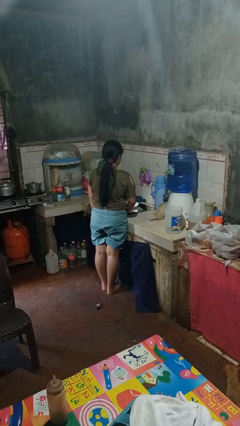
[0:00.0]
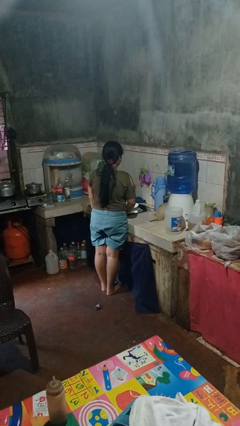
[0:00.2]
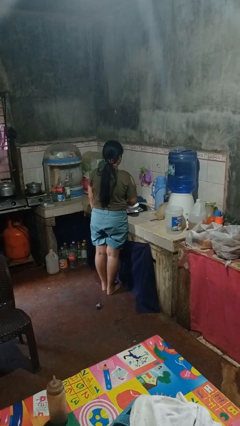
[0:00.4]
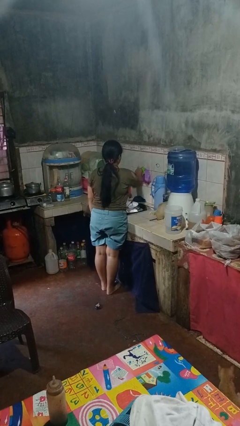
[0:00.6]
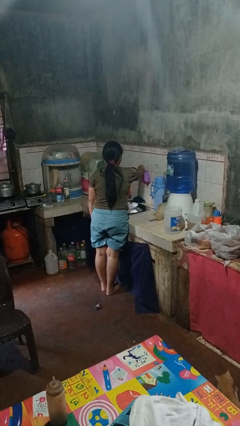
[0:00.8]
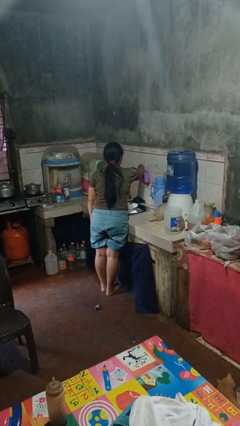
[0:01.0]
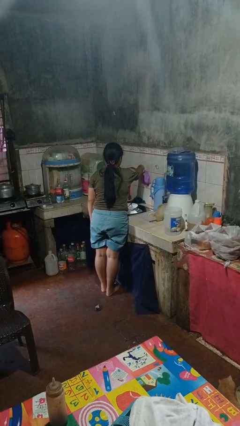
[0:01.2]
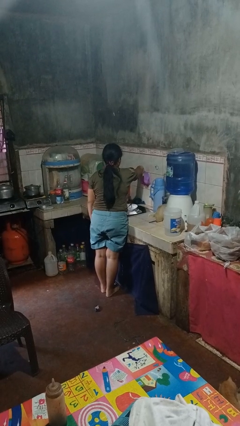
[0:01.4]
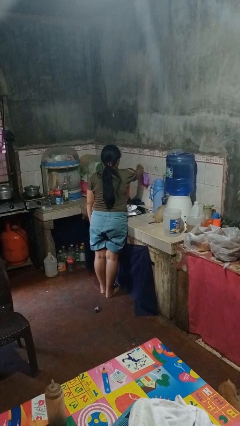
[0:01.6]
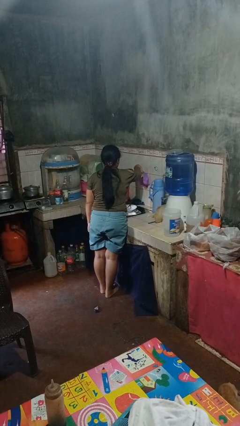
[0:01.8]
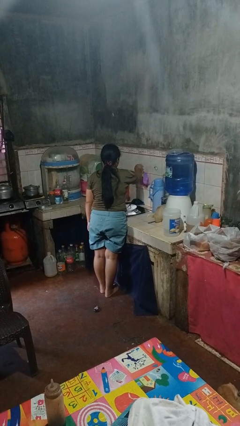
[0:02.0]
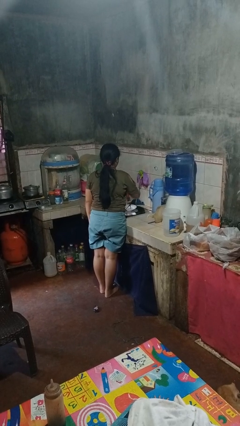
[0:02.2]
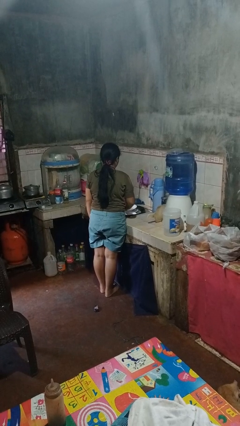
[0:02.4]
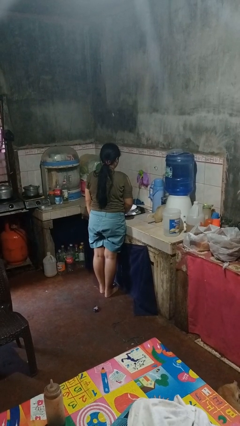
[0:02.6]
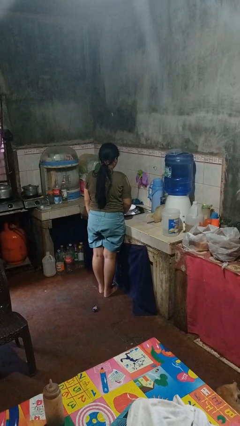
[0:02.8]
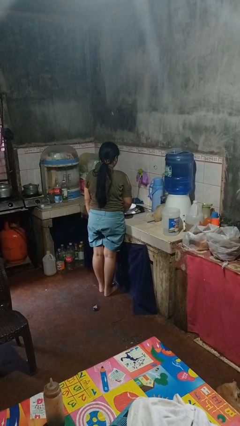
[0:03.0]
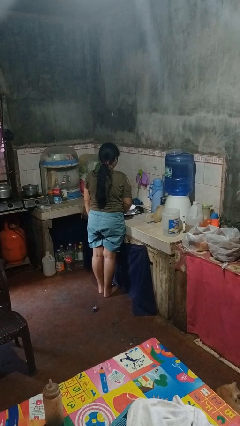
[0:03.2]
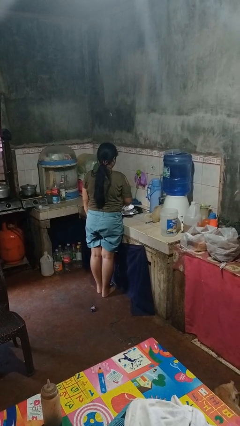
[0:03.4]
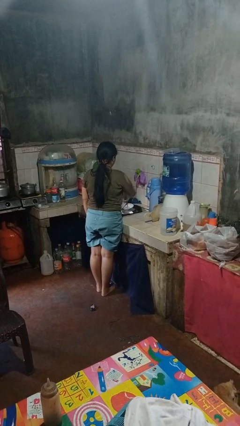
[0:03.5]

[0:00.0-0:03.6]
person turns on faucet

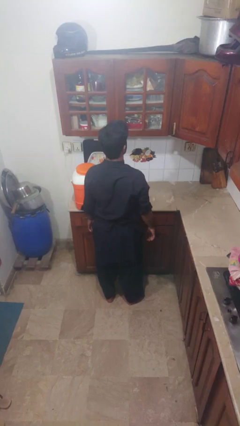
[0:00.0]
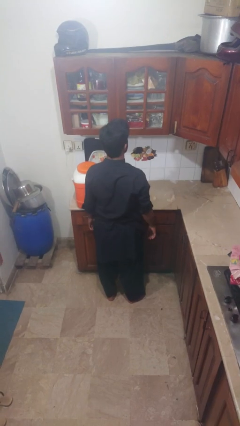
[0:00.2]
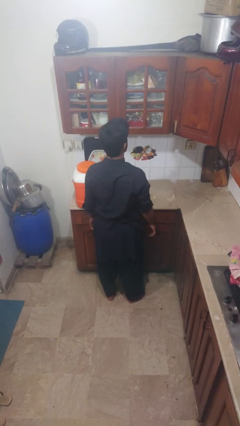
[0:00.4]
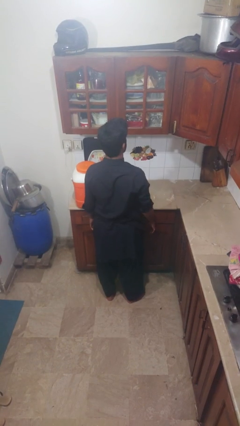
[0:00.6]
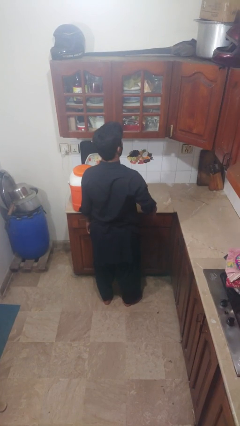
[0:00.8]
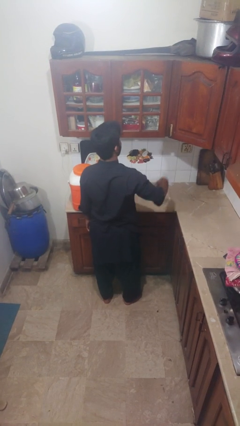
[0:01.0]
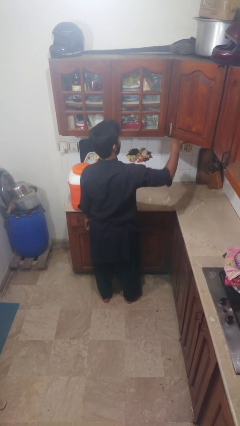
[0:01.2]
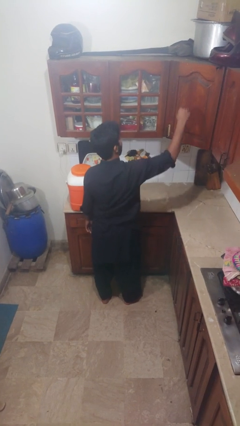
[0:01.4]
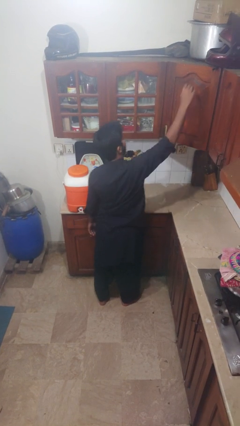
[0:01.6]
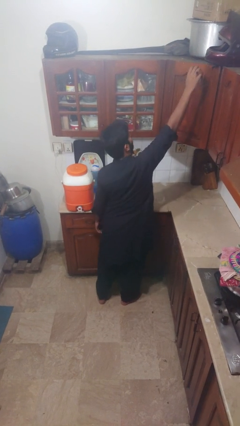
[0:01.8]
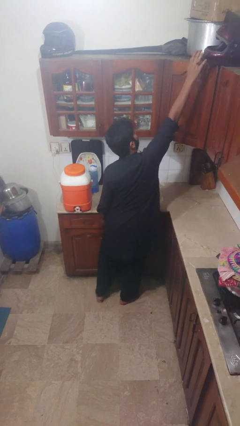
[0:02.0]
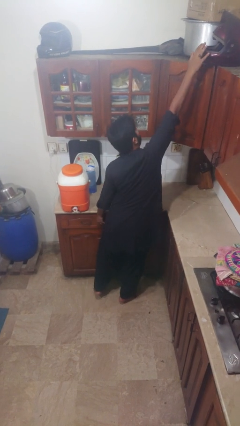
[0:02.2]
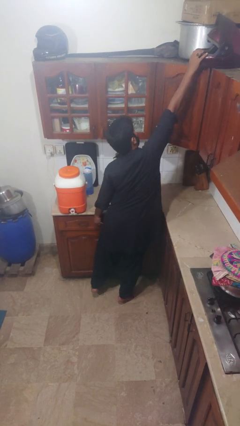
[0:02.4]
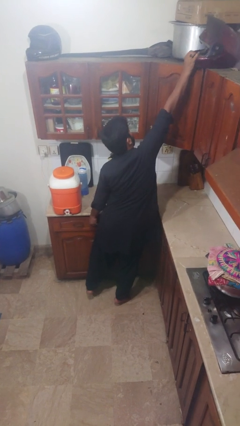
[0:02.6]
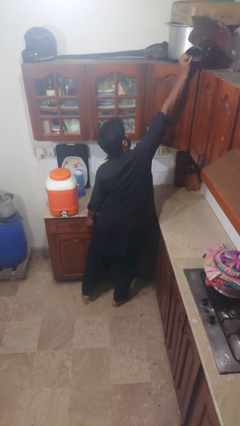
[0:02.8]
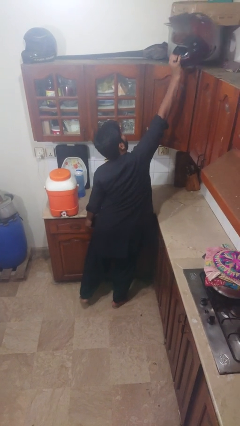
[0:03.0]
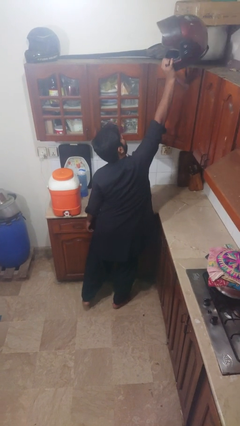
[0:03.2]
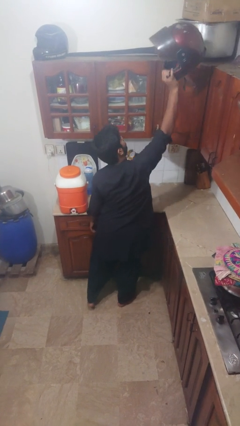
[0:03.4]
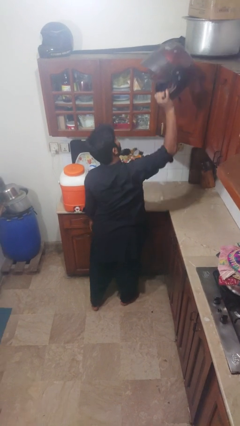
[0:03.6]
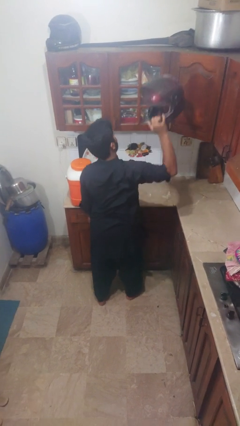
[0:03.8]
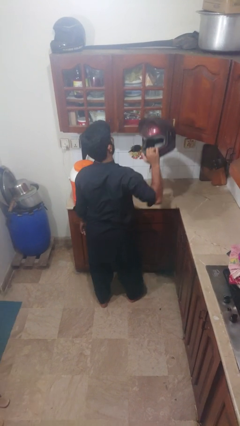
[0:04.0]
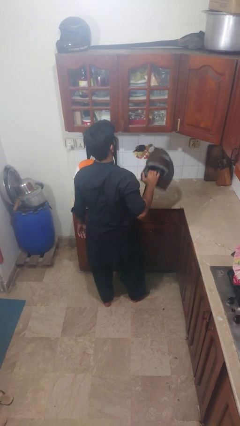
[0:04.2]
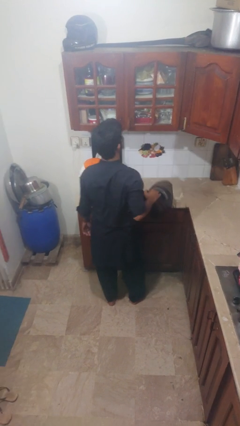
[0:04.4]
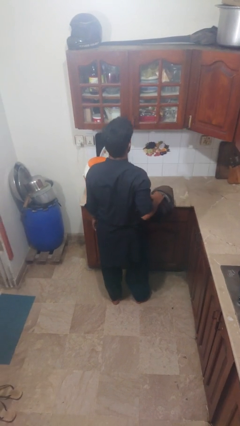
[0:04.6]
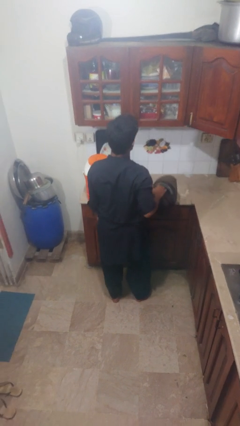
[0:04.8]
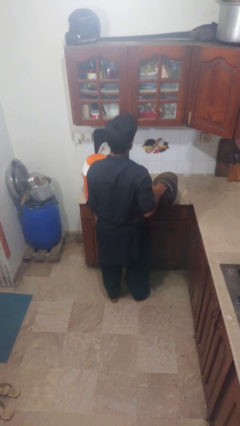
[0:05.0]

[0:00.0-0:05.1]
person picks up object from shelf

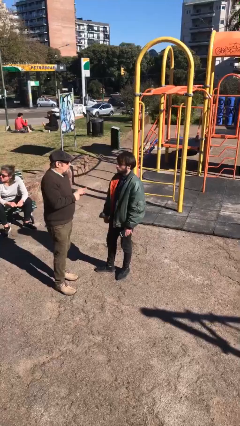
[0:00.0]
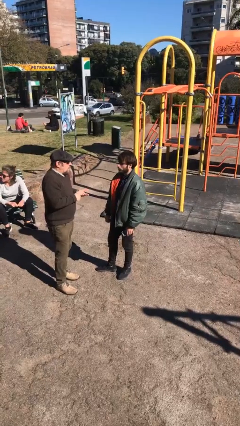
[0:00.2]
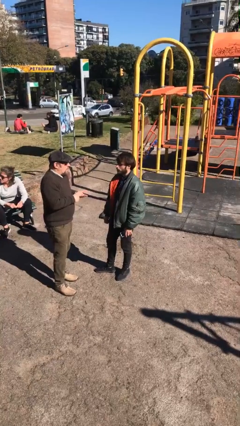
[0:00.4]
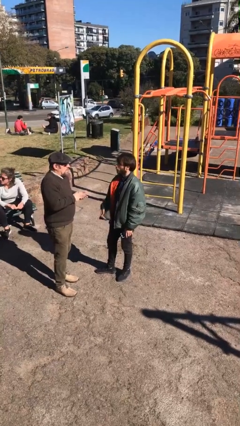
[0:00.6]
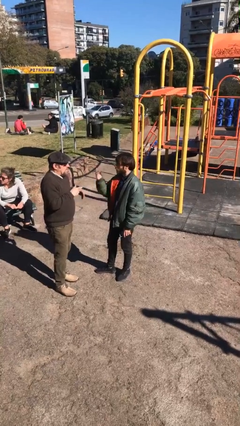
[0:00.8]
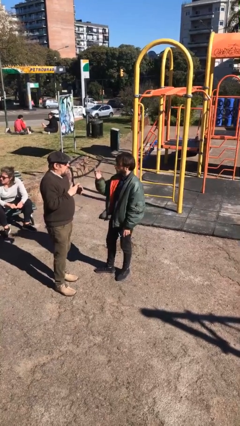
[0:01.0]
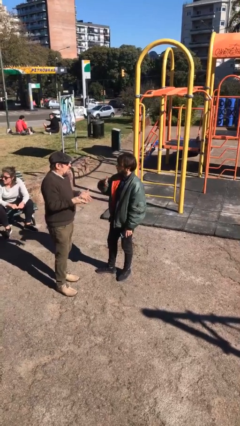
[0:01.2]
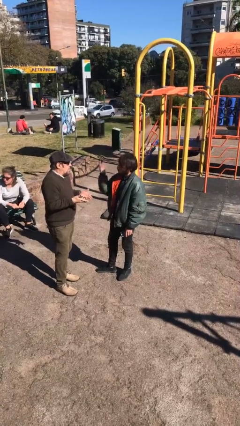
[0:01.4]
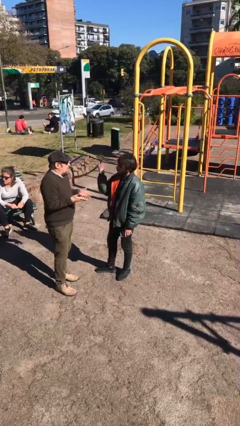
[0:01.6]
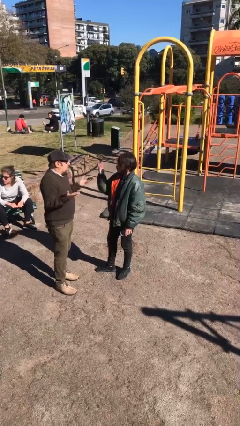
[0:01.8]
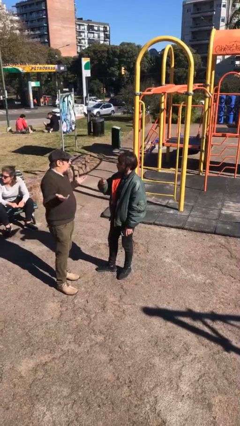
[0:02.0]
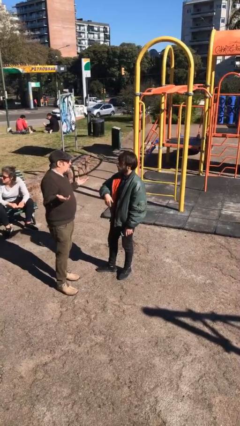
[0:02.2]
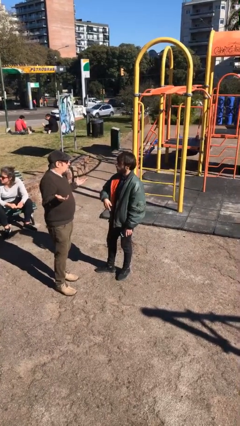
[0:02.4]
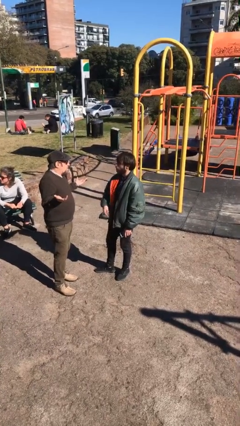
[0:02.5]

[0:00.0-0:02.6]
person talks to person

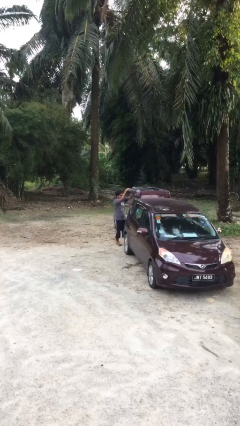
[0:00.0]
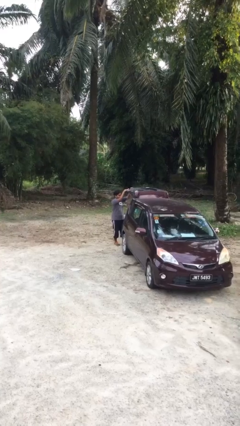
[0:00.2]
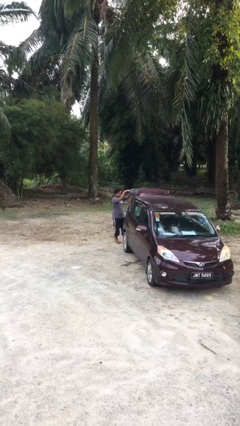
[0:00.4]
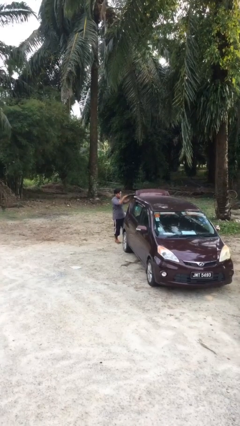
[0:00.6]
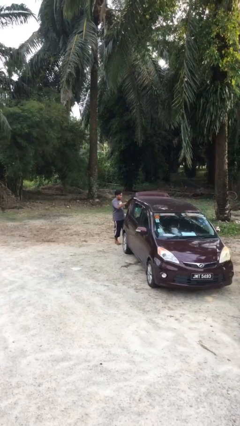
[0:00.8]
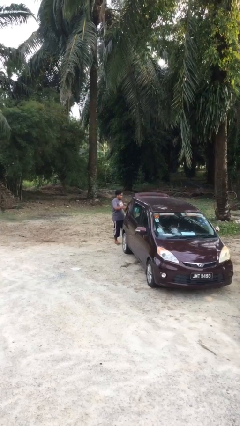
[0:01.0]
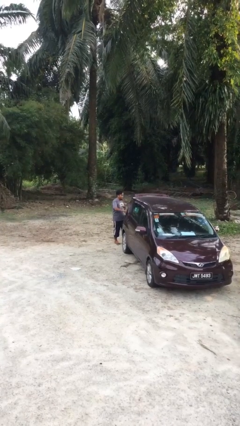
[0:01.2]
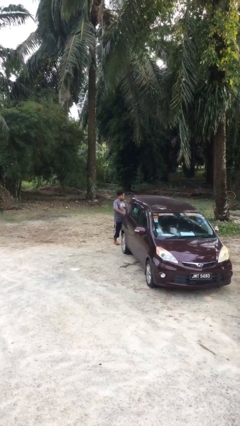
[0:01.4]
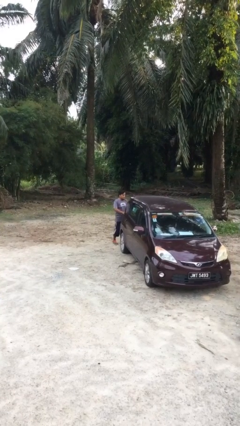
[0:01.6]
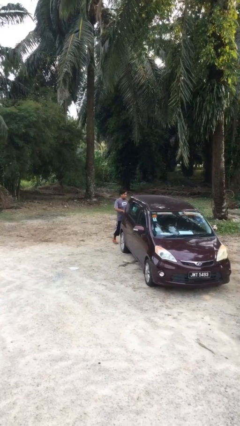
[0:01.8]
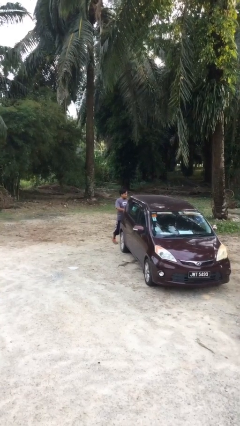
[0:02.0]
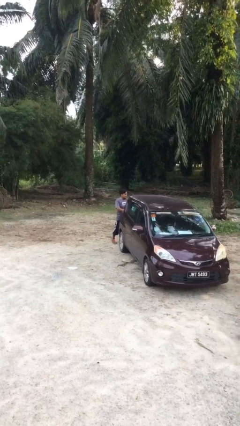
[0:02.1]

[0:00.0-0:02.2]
person closes car trunk

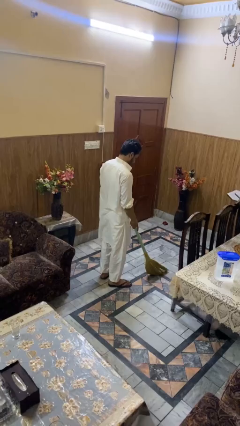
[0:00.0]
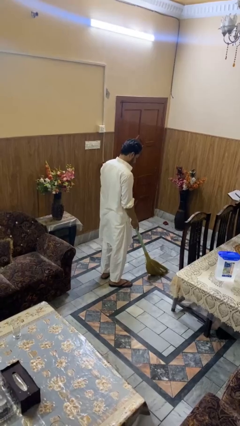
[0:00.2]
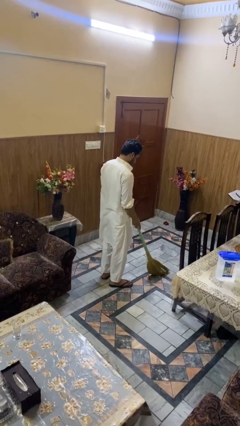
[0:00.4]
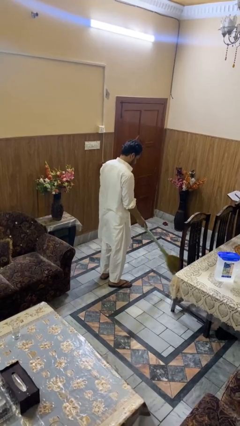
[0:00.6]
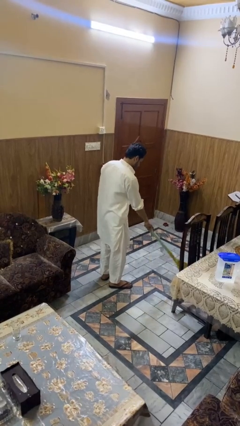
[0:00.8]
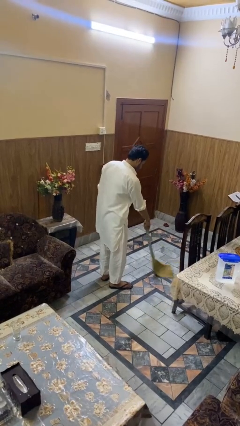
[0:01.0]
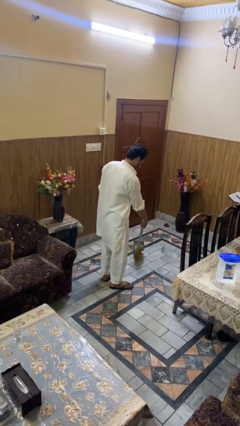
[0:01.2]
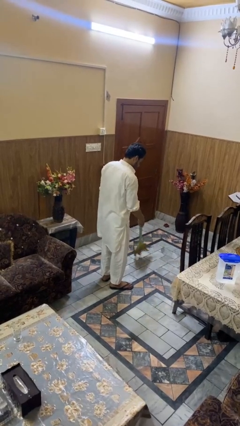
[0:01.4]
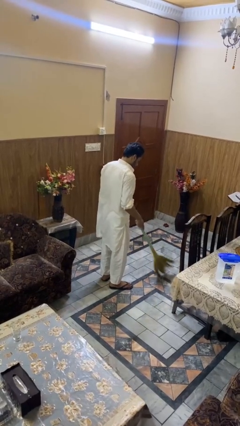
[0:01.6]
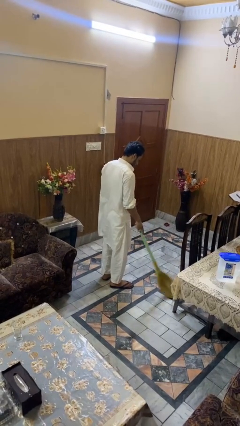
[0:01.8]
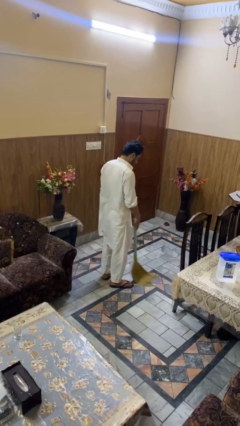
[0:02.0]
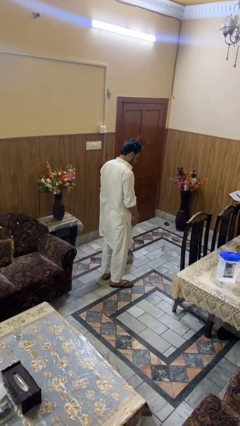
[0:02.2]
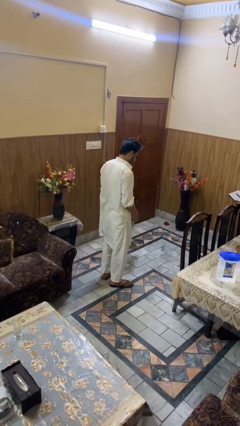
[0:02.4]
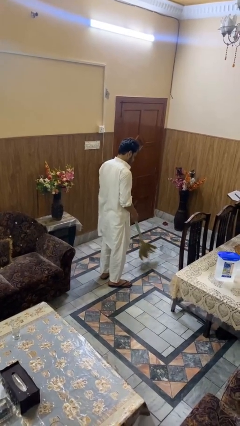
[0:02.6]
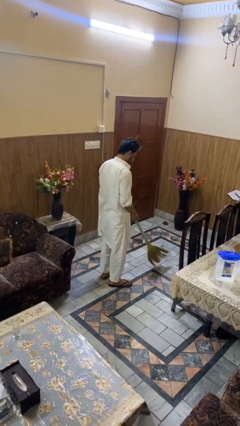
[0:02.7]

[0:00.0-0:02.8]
person sweeps floor

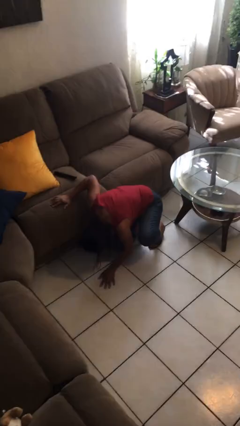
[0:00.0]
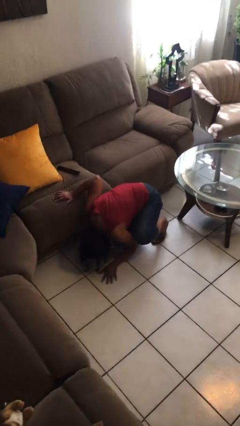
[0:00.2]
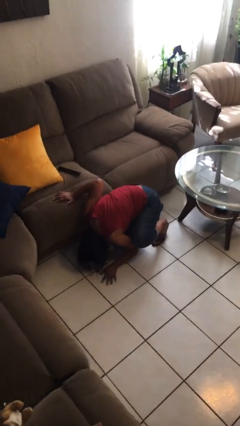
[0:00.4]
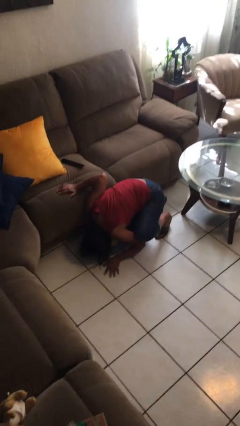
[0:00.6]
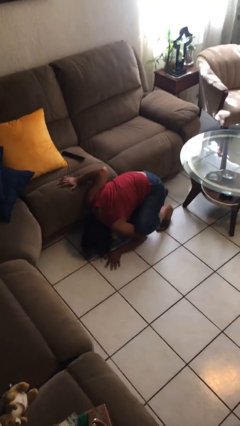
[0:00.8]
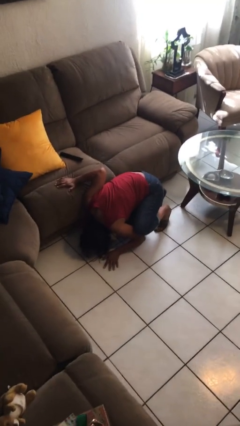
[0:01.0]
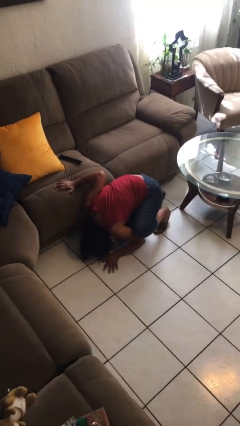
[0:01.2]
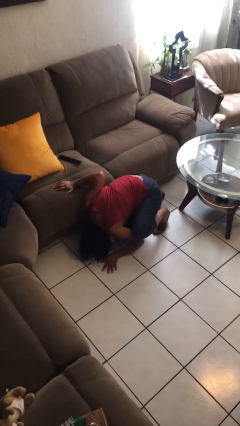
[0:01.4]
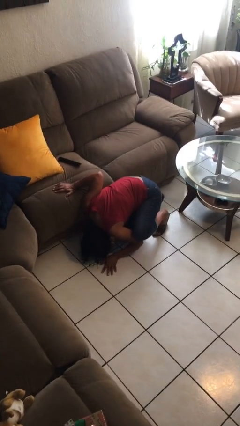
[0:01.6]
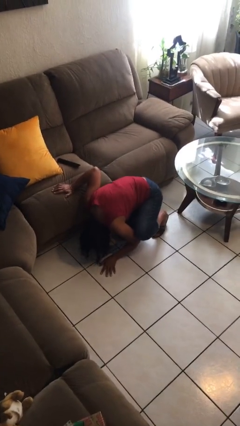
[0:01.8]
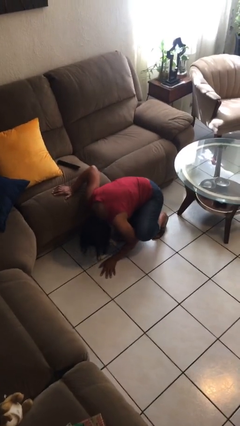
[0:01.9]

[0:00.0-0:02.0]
person searches under couch
